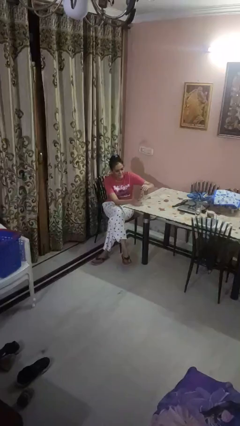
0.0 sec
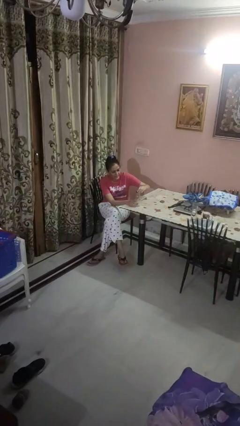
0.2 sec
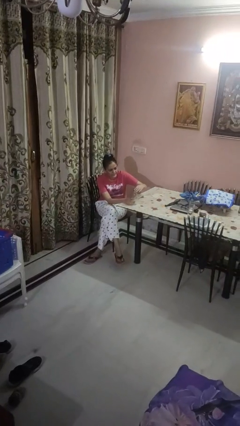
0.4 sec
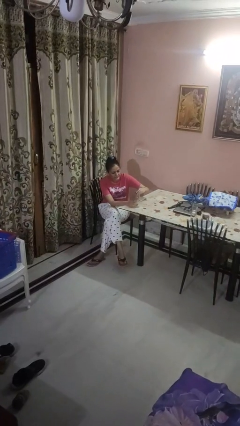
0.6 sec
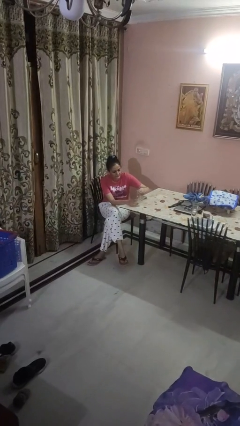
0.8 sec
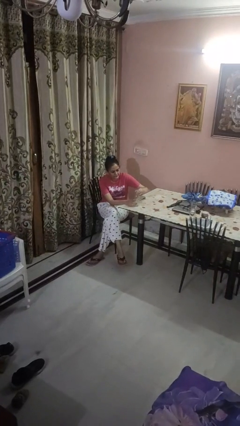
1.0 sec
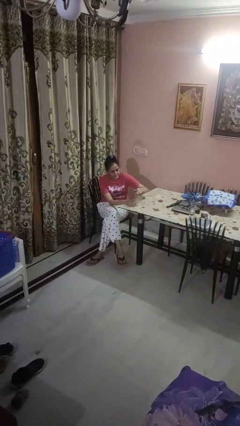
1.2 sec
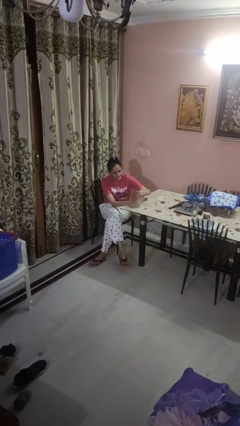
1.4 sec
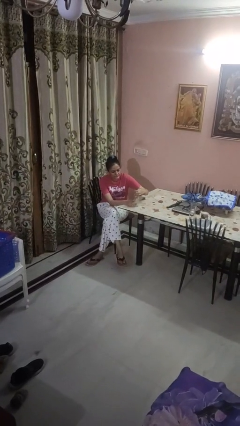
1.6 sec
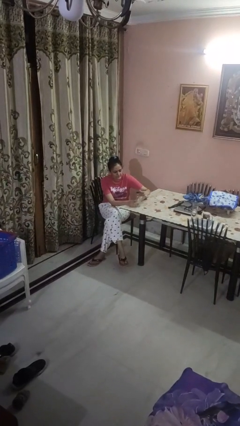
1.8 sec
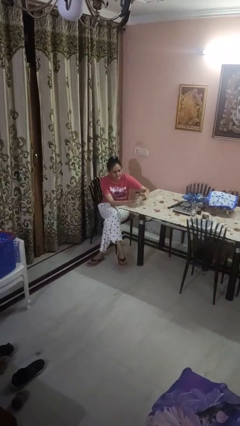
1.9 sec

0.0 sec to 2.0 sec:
person screws lid to bottle

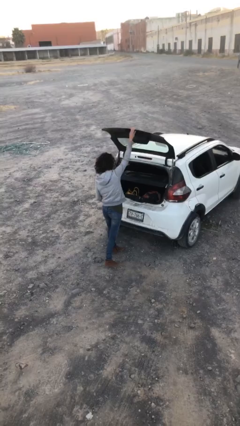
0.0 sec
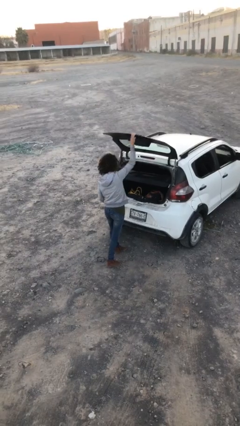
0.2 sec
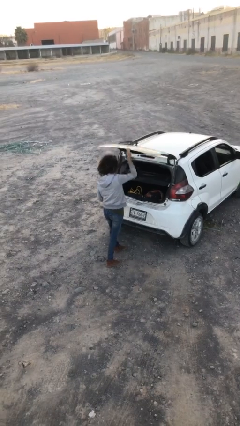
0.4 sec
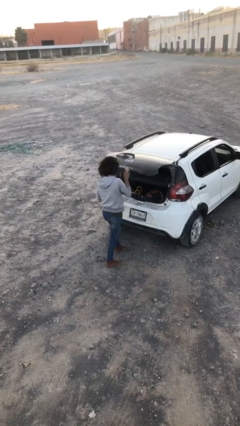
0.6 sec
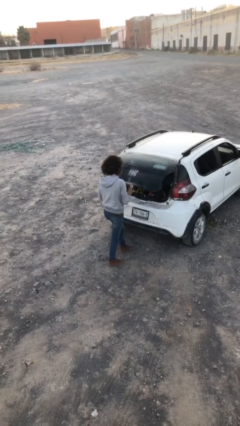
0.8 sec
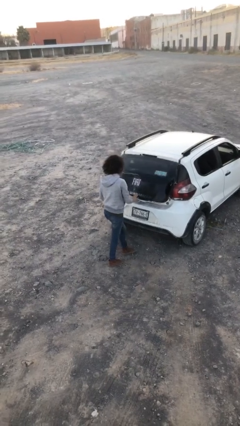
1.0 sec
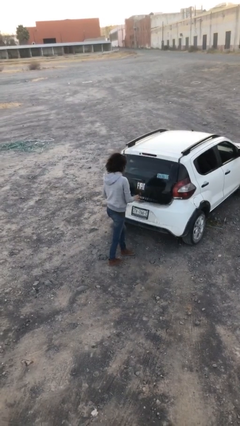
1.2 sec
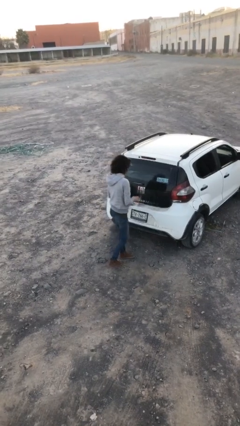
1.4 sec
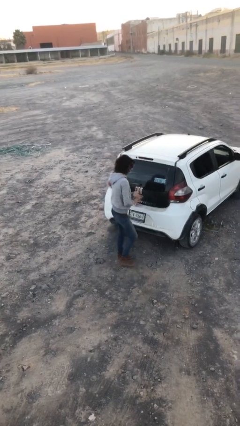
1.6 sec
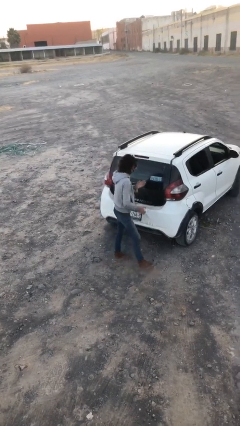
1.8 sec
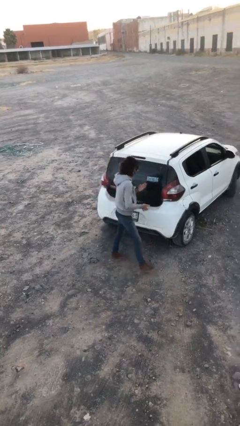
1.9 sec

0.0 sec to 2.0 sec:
person closes car trunk

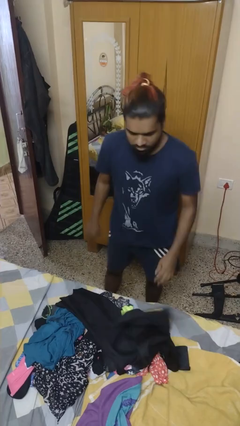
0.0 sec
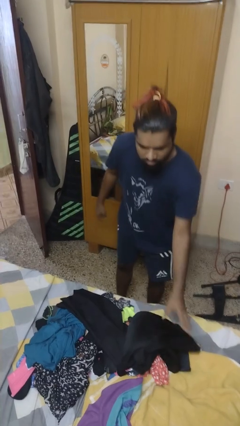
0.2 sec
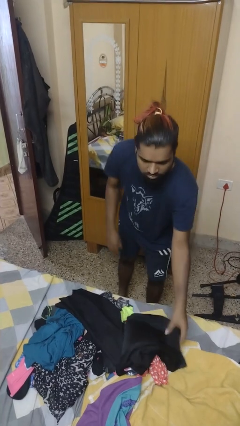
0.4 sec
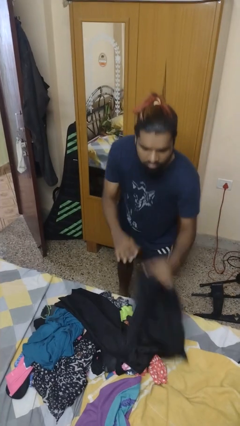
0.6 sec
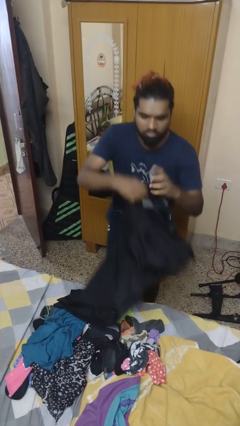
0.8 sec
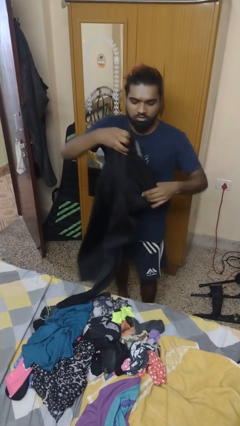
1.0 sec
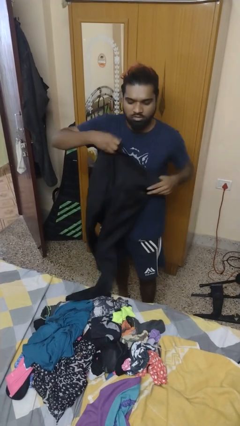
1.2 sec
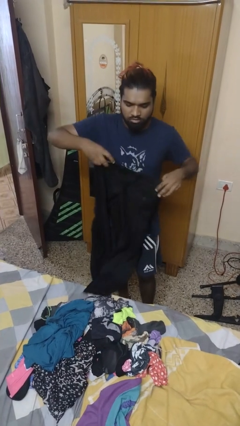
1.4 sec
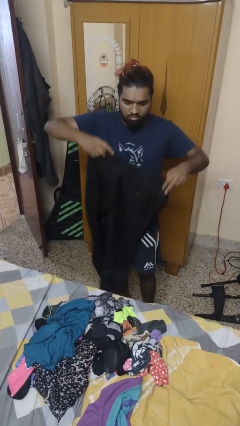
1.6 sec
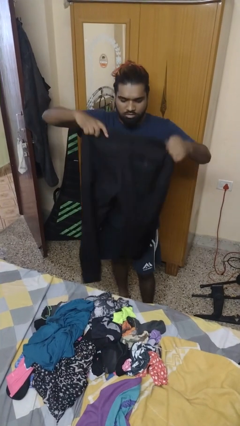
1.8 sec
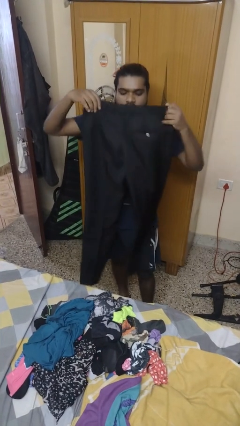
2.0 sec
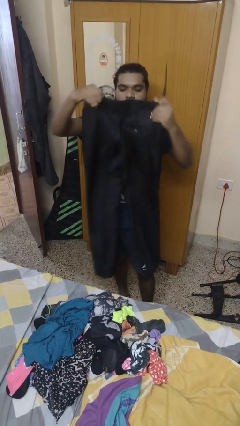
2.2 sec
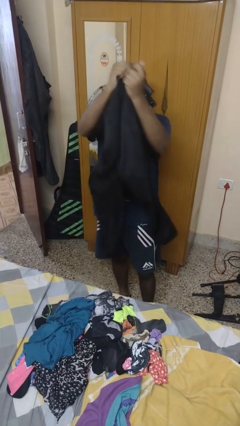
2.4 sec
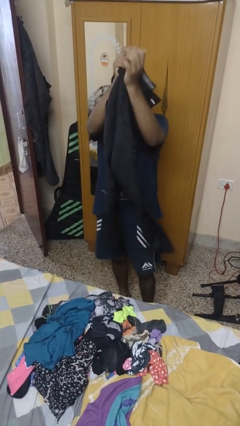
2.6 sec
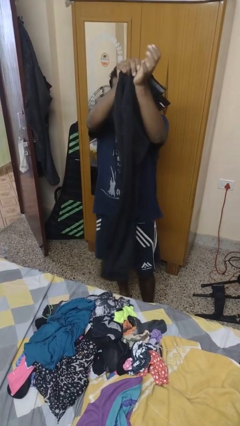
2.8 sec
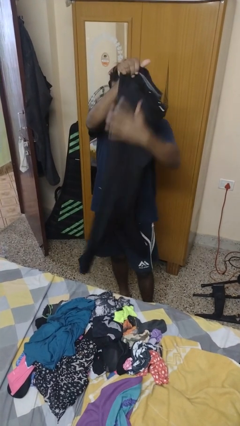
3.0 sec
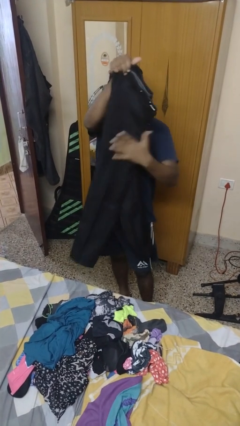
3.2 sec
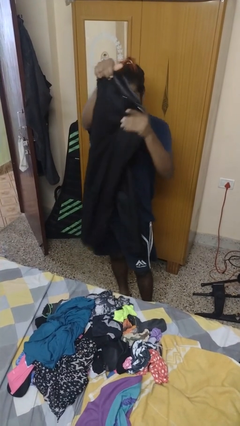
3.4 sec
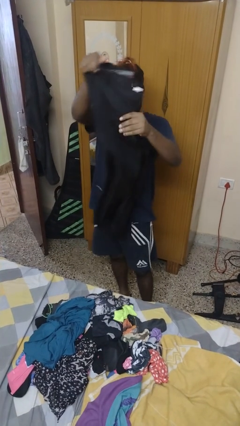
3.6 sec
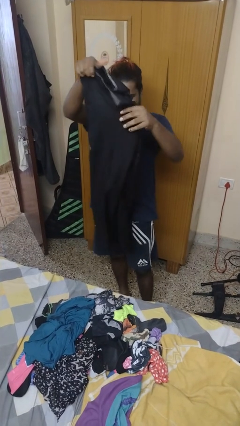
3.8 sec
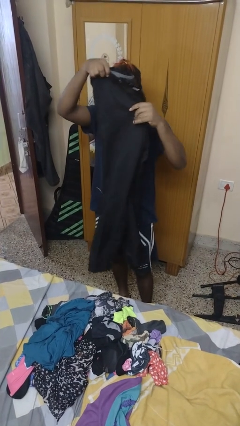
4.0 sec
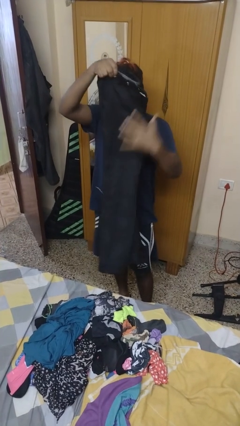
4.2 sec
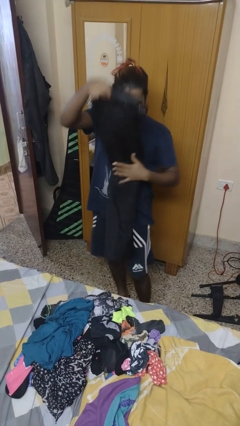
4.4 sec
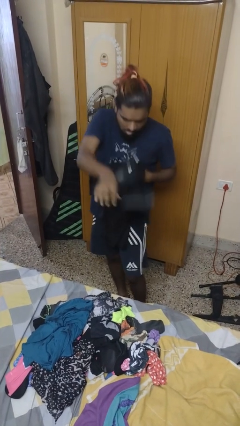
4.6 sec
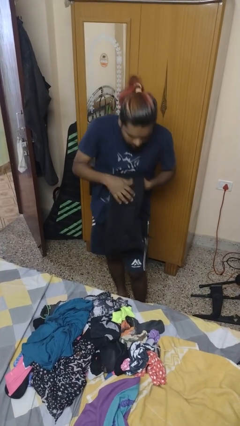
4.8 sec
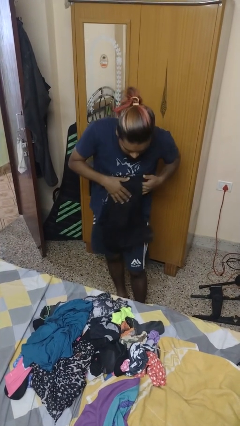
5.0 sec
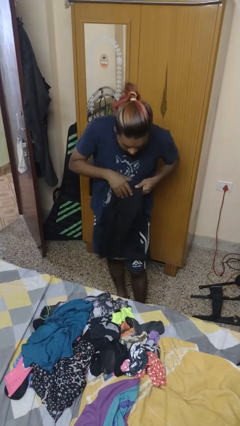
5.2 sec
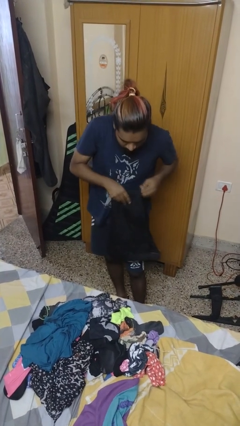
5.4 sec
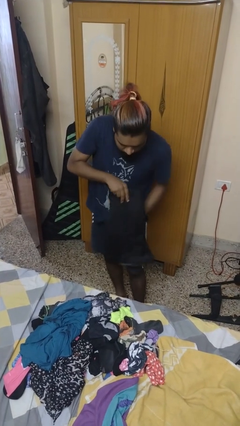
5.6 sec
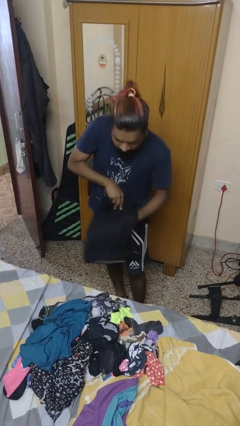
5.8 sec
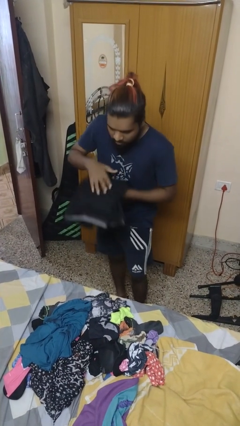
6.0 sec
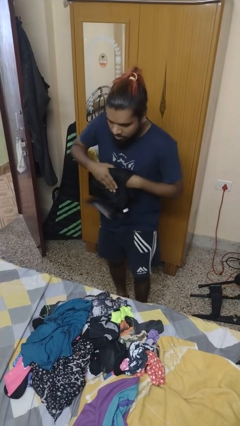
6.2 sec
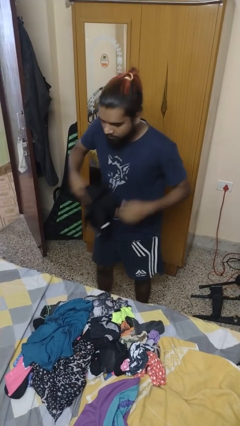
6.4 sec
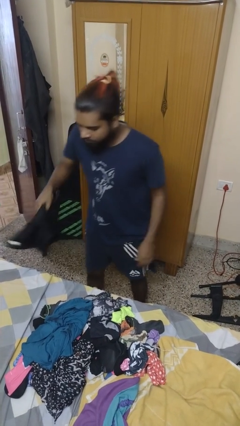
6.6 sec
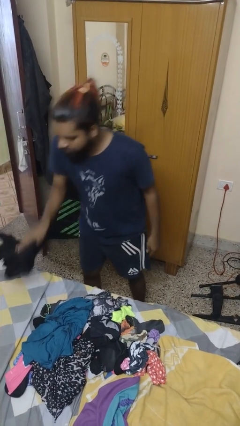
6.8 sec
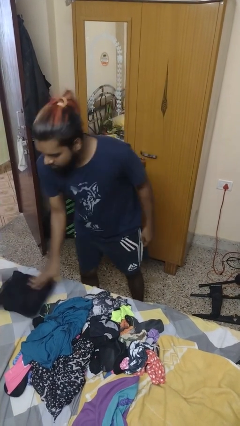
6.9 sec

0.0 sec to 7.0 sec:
person folds pants

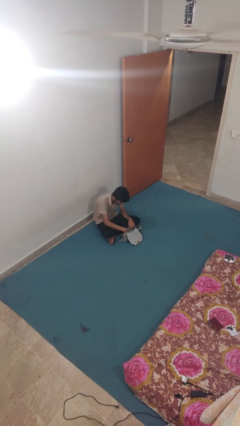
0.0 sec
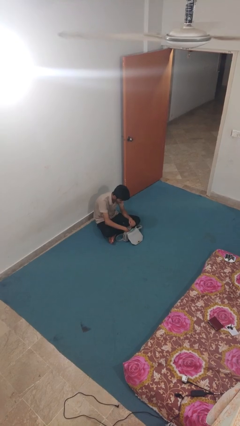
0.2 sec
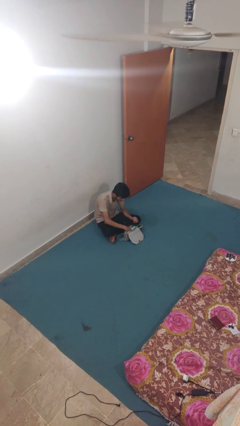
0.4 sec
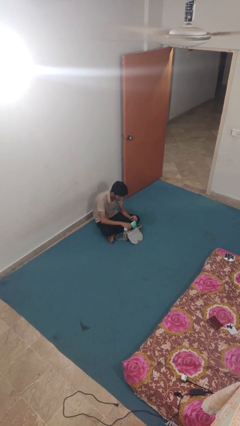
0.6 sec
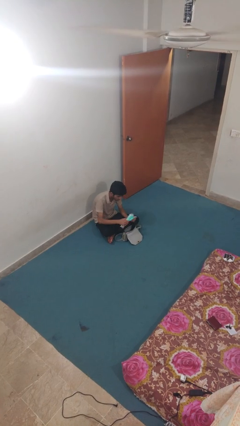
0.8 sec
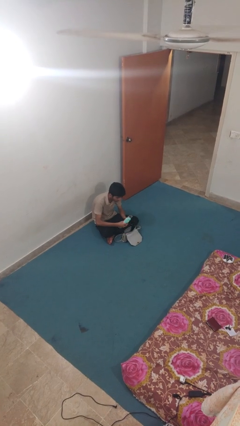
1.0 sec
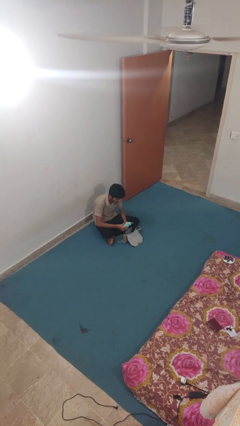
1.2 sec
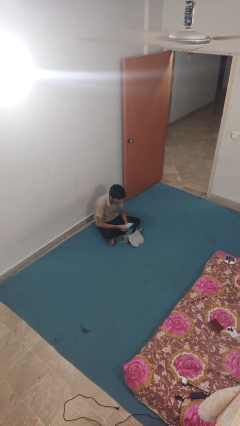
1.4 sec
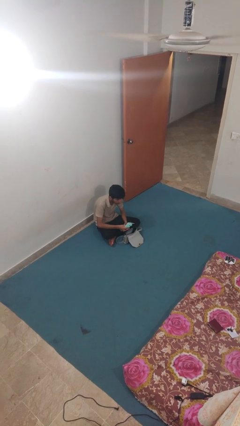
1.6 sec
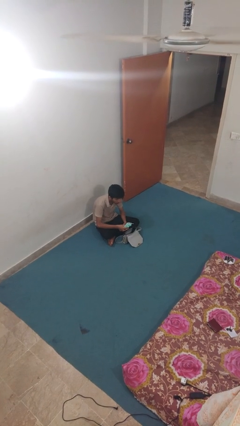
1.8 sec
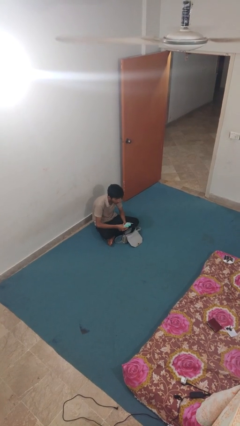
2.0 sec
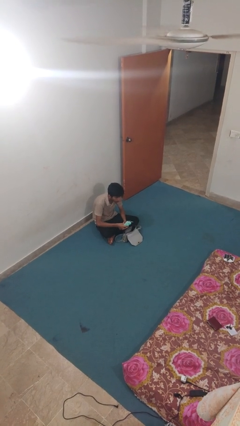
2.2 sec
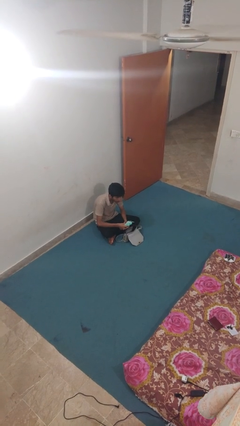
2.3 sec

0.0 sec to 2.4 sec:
person takes object from purse

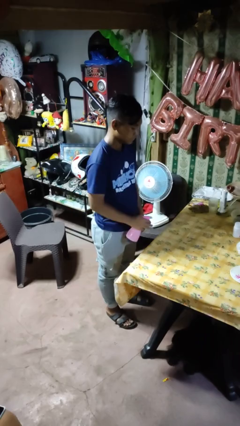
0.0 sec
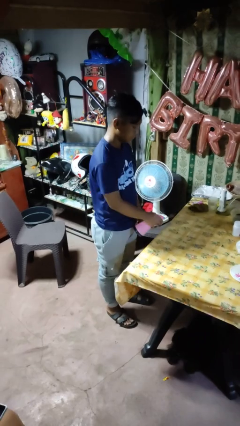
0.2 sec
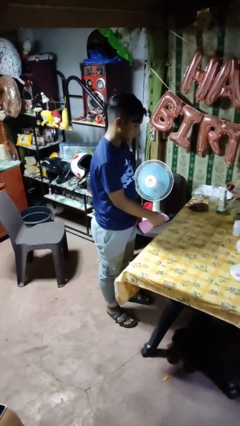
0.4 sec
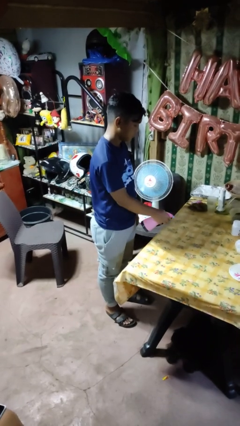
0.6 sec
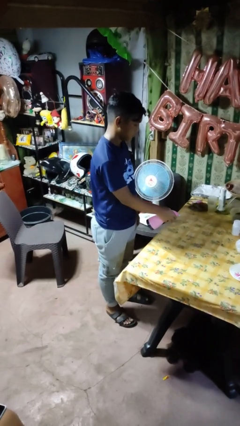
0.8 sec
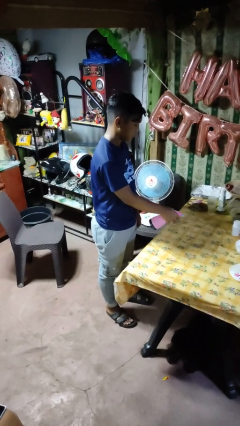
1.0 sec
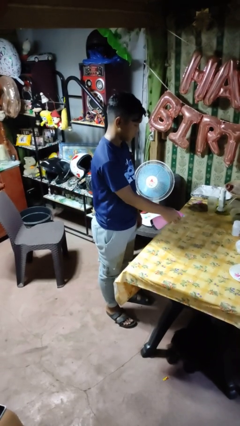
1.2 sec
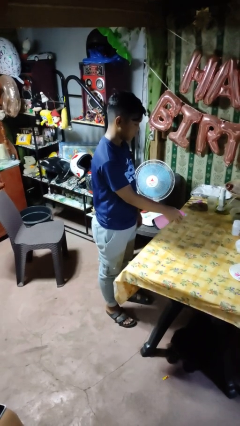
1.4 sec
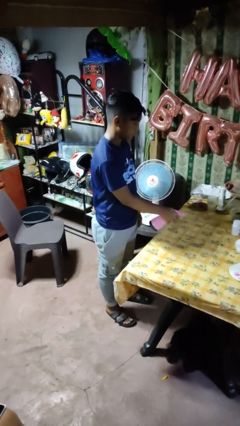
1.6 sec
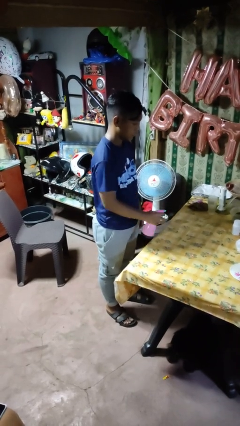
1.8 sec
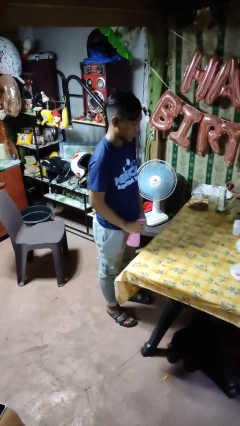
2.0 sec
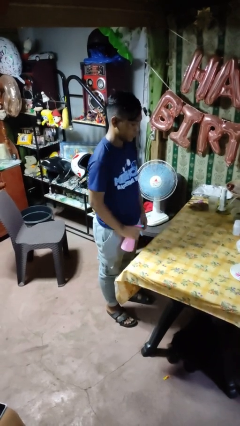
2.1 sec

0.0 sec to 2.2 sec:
person sprays from bottle

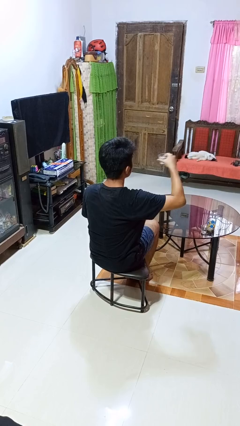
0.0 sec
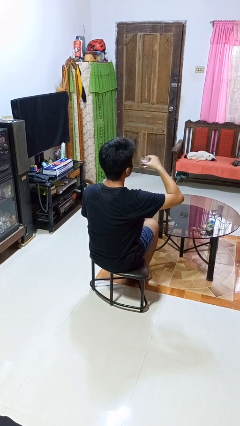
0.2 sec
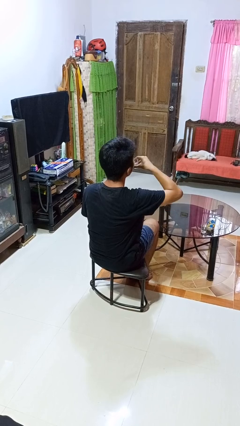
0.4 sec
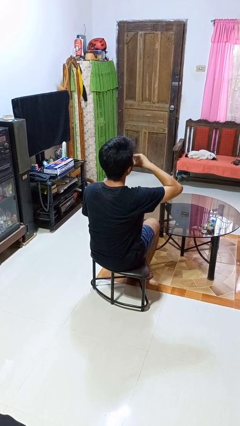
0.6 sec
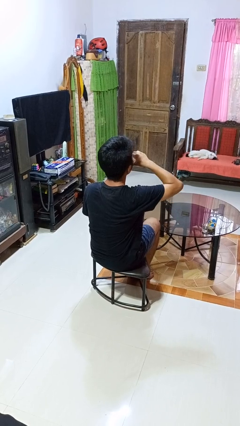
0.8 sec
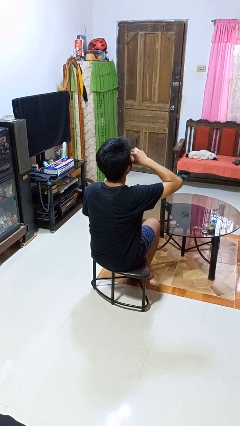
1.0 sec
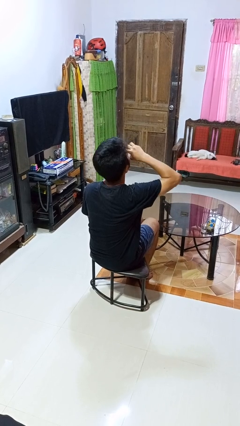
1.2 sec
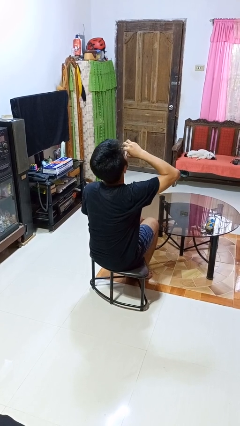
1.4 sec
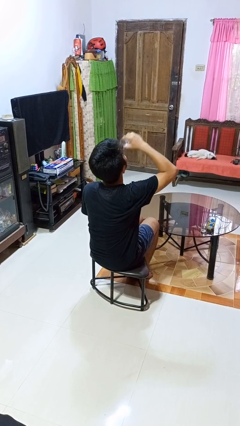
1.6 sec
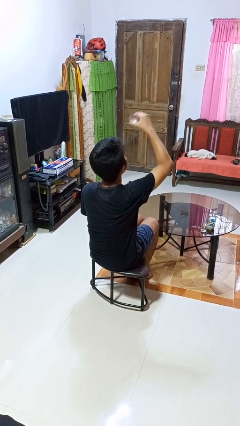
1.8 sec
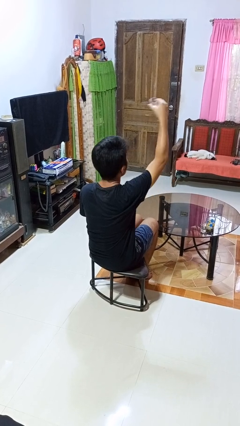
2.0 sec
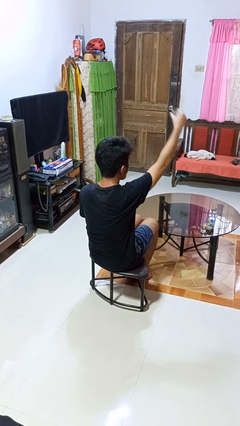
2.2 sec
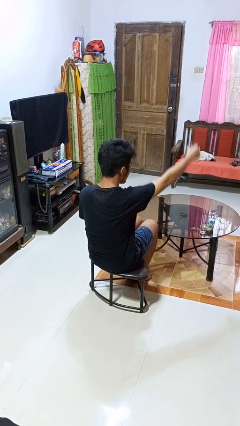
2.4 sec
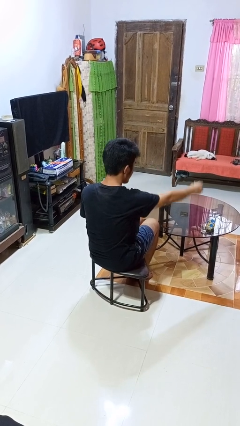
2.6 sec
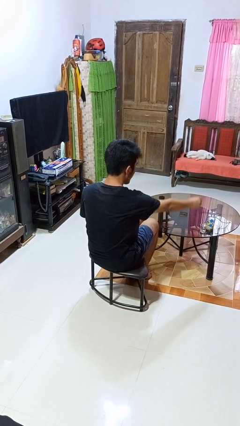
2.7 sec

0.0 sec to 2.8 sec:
person drinks from shotglass
